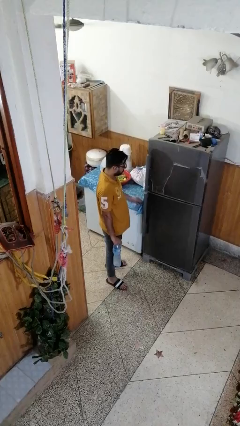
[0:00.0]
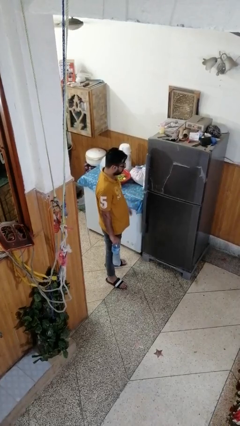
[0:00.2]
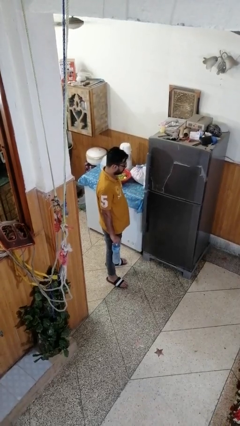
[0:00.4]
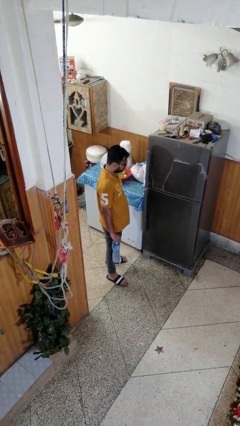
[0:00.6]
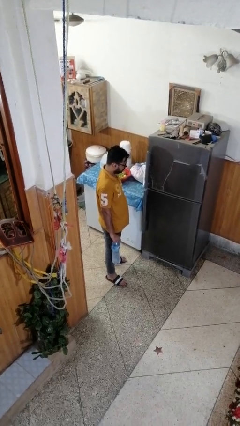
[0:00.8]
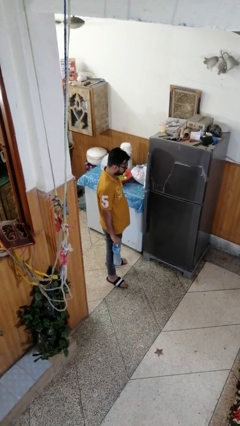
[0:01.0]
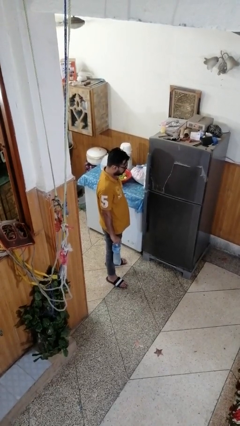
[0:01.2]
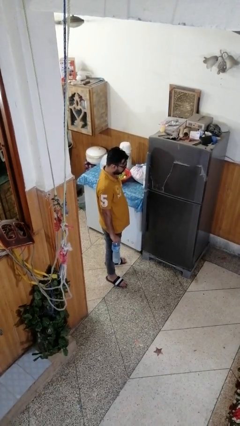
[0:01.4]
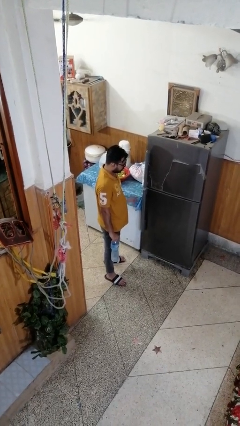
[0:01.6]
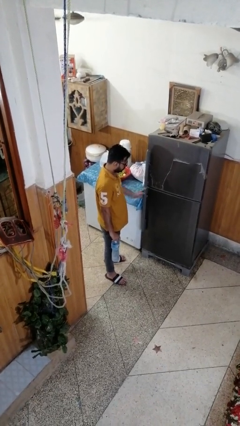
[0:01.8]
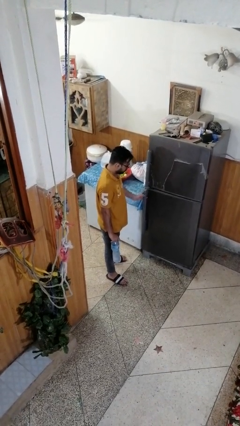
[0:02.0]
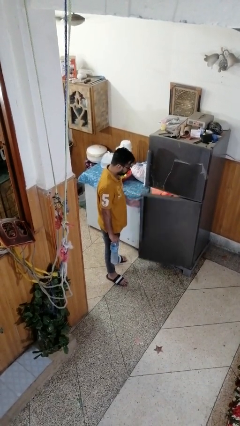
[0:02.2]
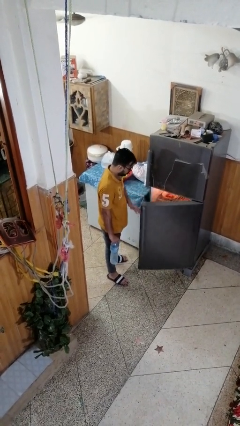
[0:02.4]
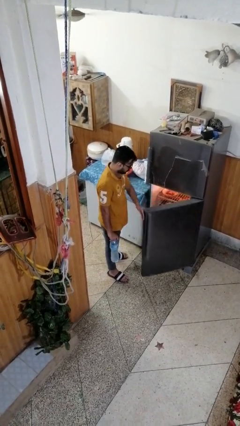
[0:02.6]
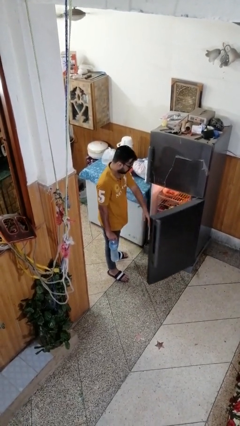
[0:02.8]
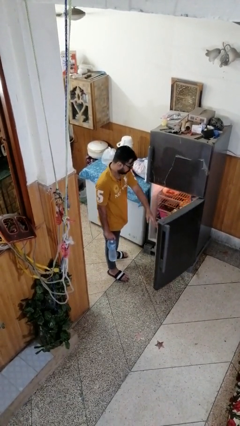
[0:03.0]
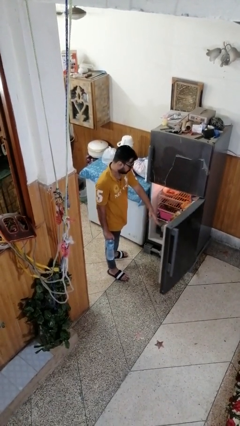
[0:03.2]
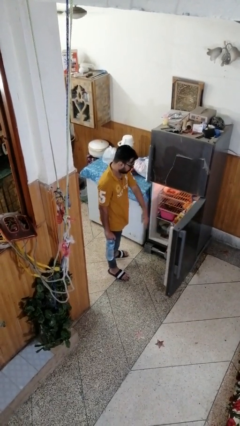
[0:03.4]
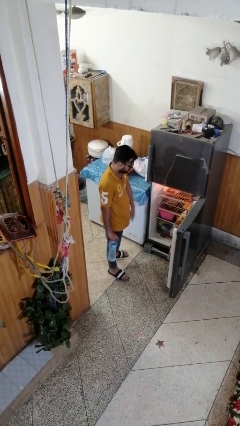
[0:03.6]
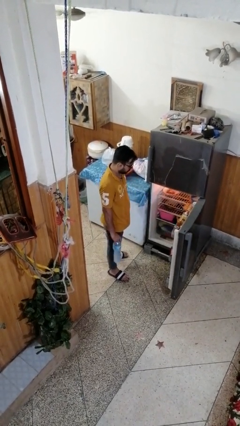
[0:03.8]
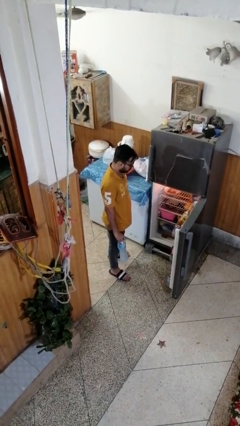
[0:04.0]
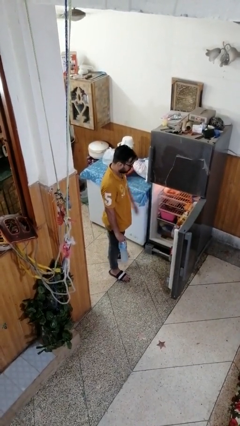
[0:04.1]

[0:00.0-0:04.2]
person opens refrigerator

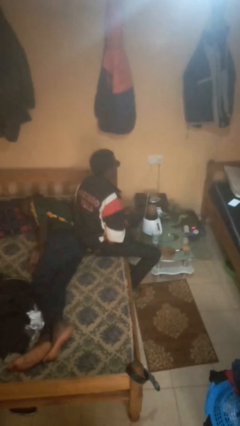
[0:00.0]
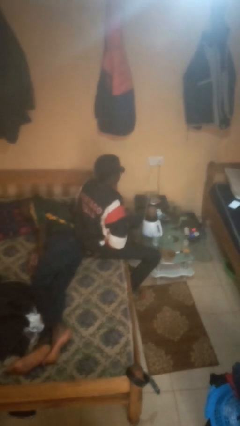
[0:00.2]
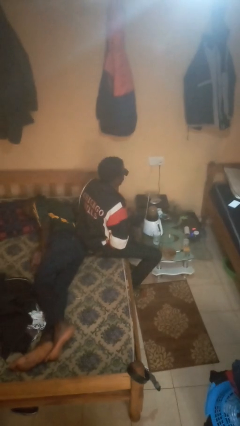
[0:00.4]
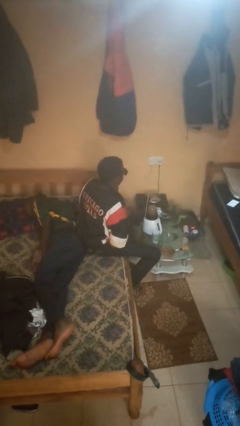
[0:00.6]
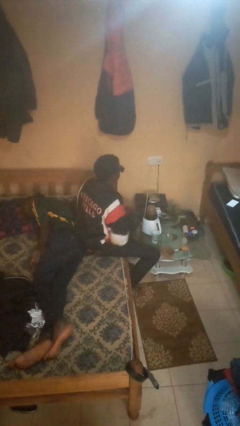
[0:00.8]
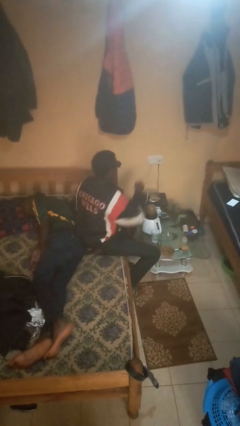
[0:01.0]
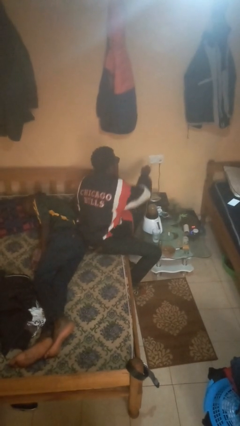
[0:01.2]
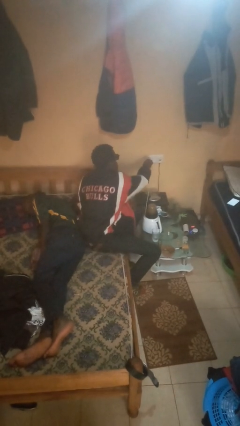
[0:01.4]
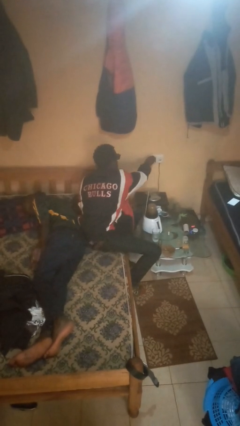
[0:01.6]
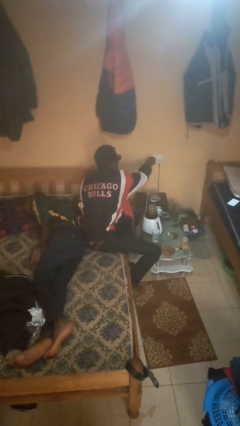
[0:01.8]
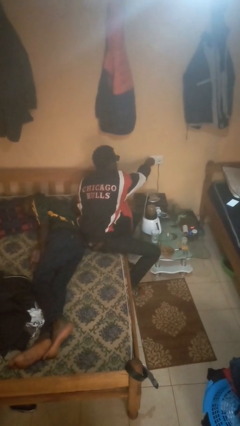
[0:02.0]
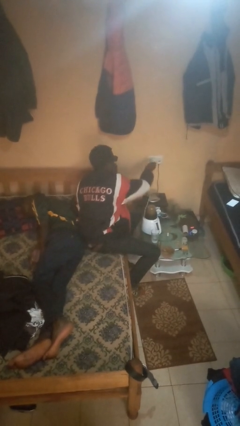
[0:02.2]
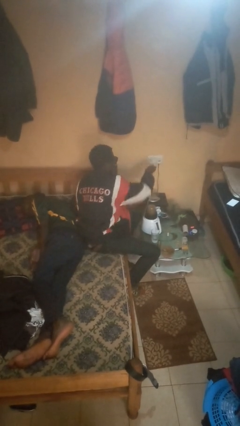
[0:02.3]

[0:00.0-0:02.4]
person unplugs from electrical socket

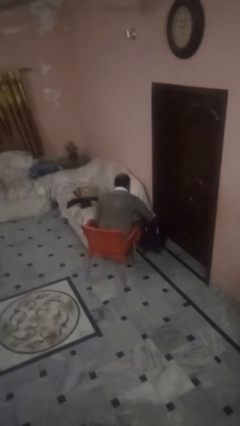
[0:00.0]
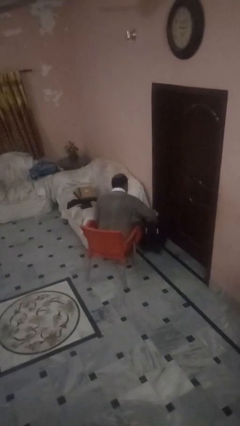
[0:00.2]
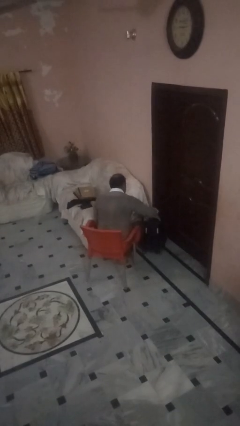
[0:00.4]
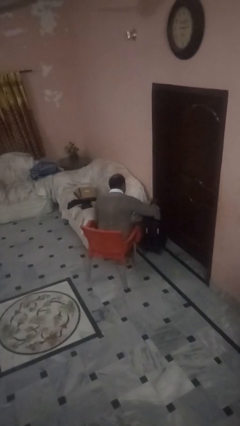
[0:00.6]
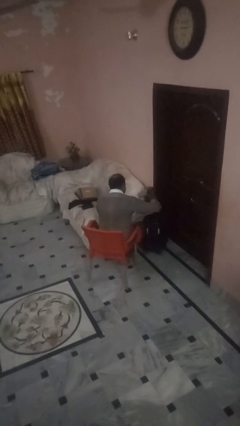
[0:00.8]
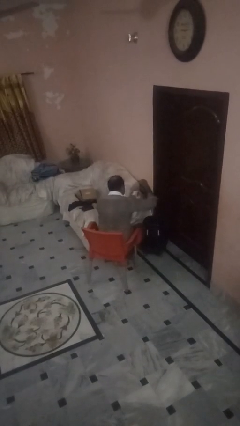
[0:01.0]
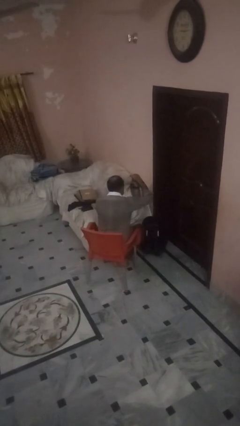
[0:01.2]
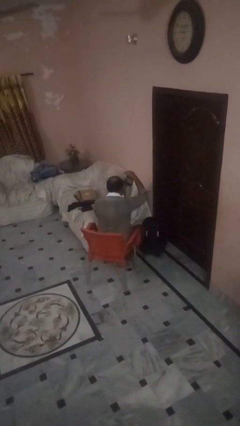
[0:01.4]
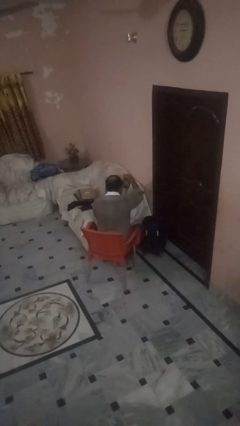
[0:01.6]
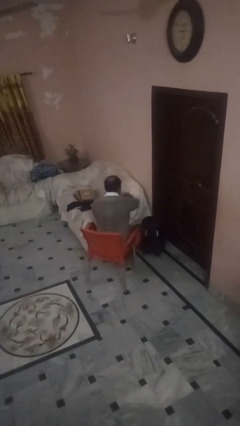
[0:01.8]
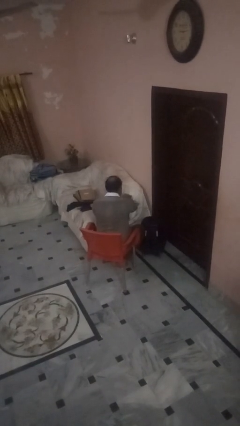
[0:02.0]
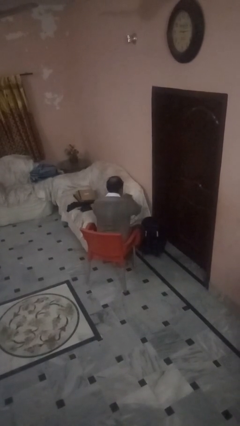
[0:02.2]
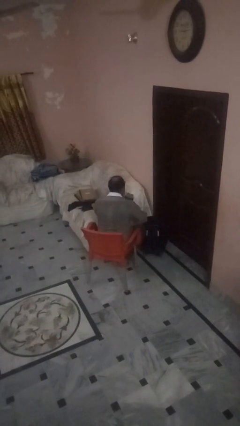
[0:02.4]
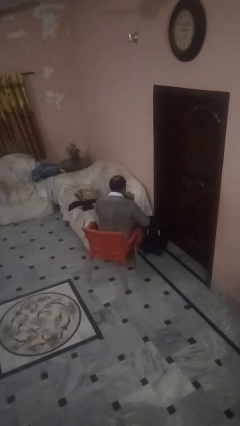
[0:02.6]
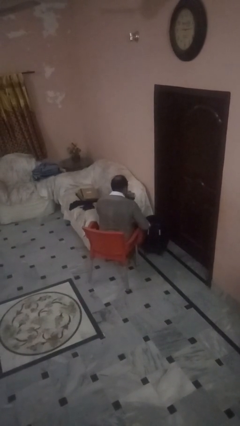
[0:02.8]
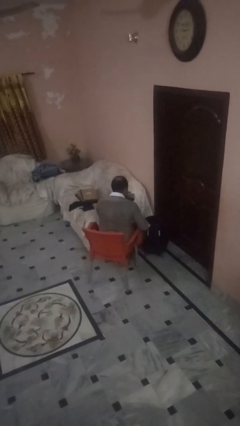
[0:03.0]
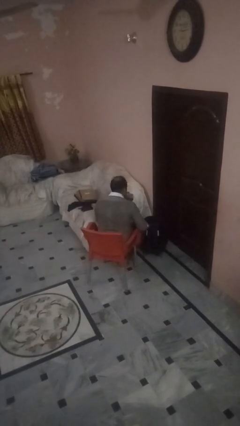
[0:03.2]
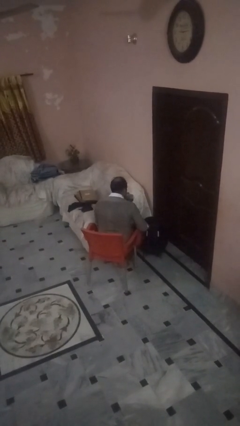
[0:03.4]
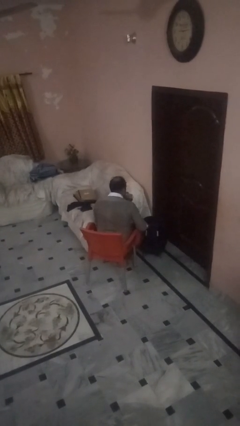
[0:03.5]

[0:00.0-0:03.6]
person unloads clothes from suitcase

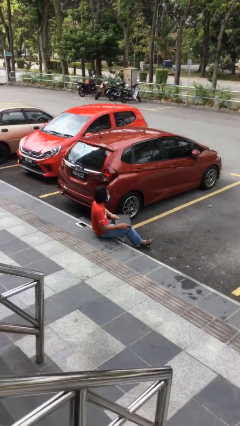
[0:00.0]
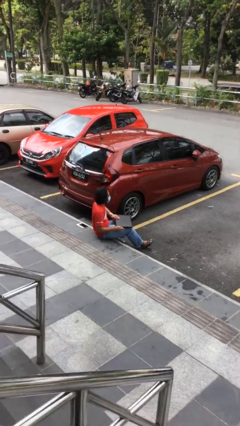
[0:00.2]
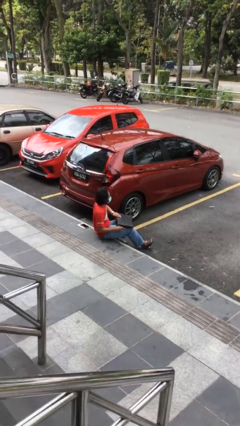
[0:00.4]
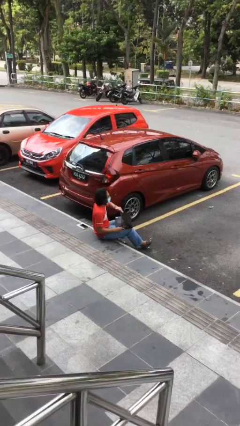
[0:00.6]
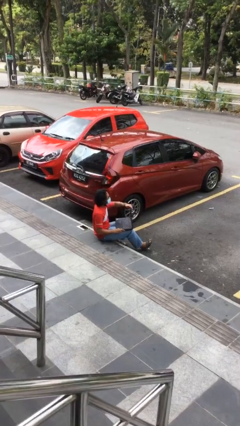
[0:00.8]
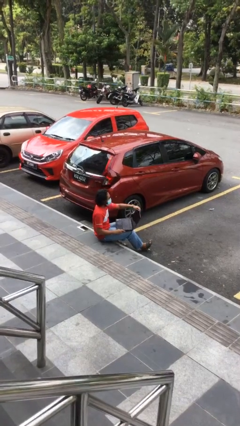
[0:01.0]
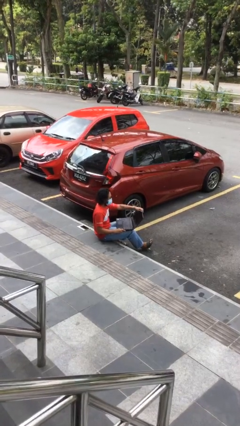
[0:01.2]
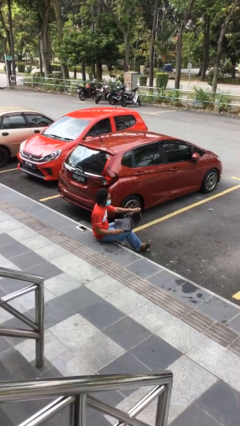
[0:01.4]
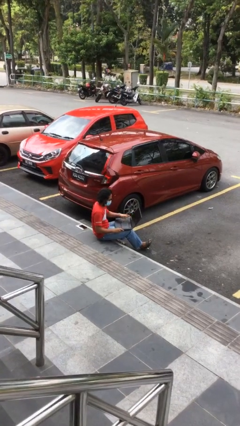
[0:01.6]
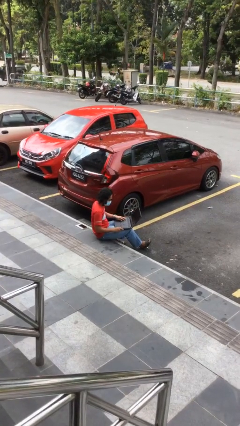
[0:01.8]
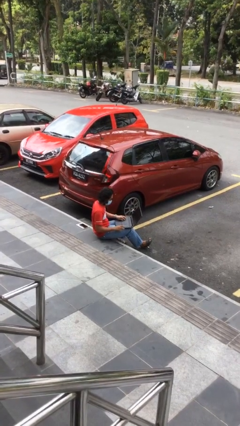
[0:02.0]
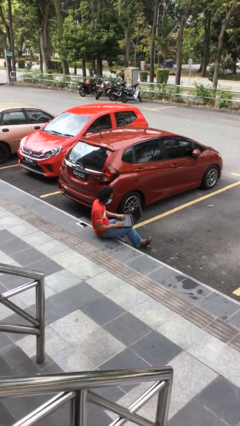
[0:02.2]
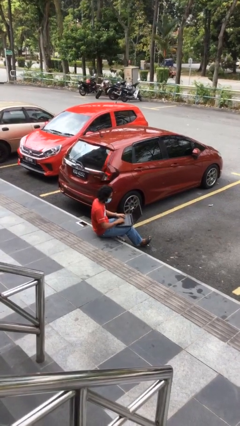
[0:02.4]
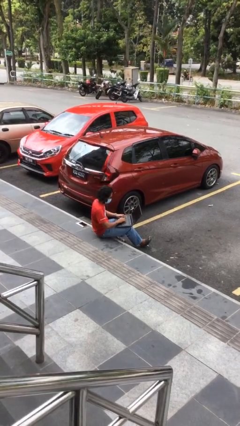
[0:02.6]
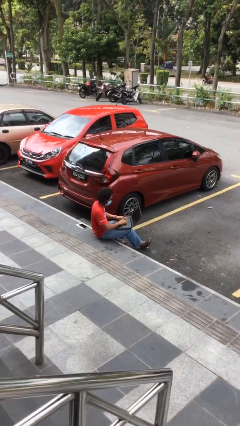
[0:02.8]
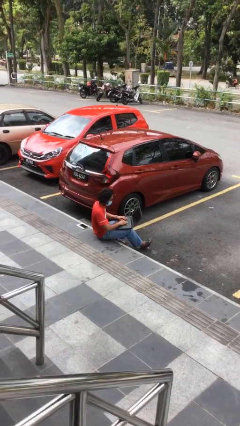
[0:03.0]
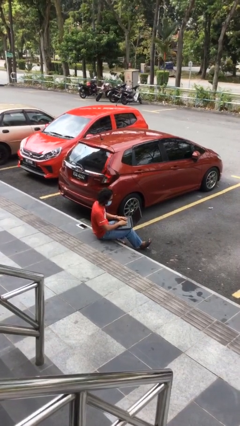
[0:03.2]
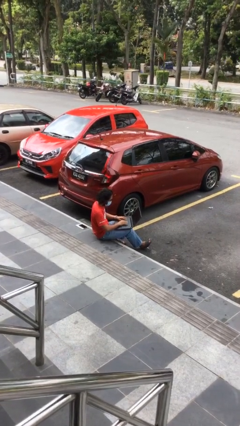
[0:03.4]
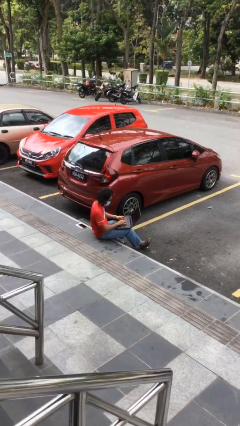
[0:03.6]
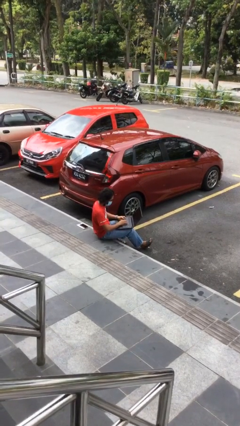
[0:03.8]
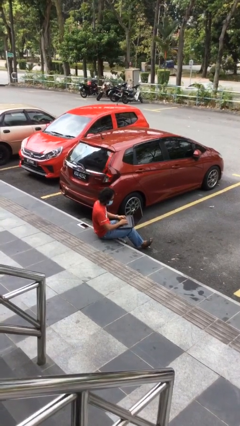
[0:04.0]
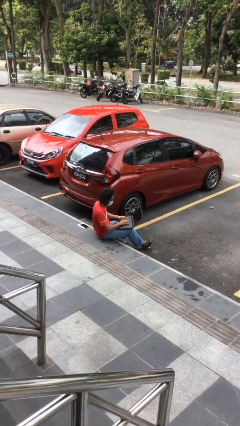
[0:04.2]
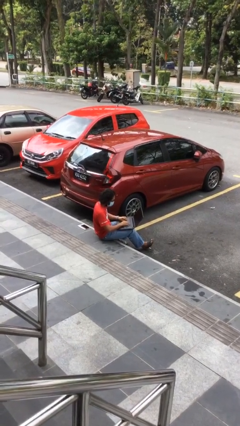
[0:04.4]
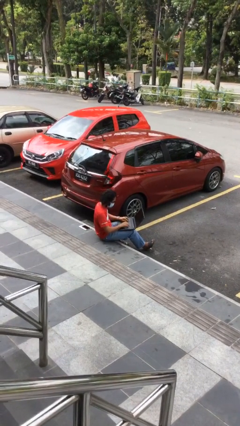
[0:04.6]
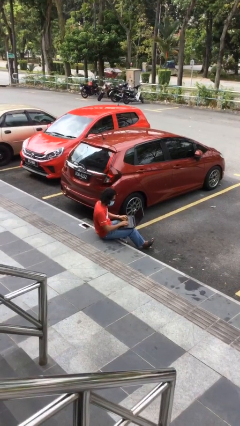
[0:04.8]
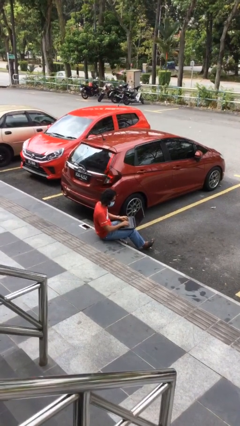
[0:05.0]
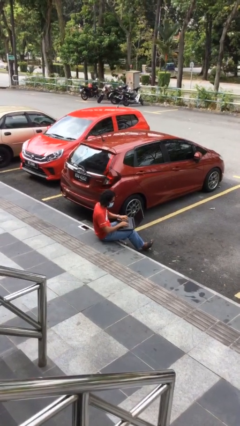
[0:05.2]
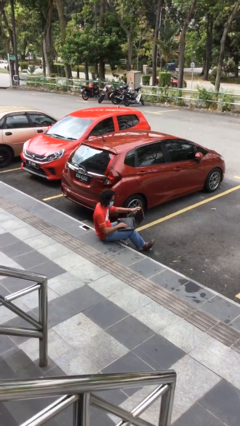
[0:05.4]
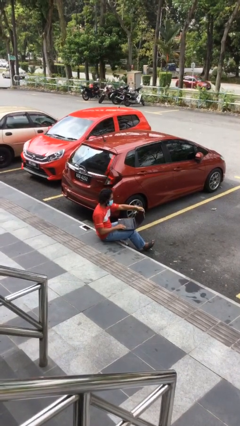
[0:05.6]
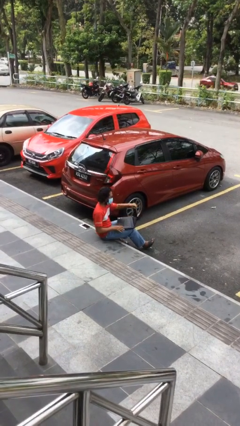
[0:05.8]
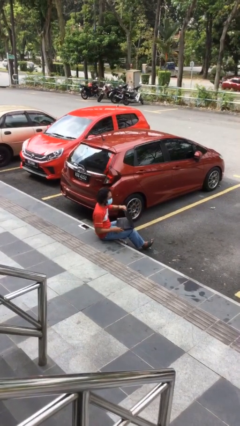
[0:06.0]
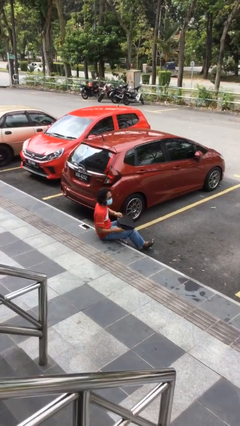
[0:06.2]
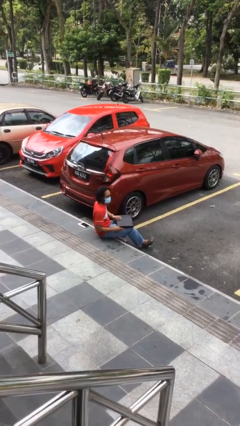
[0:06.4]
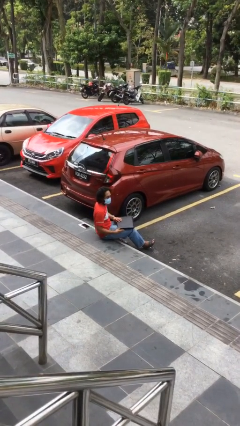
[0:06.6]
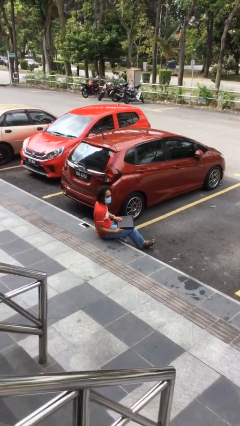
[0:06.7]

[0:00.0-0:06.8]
person interacts with laptop

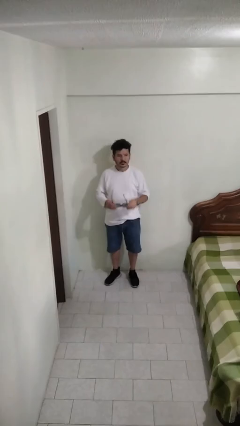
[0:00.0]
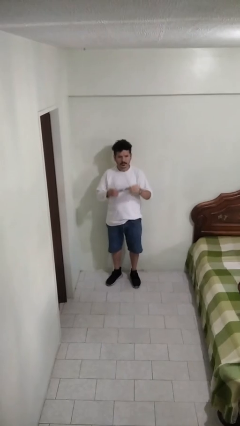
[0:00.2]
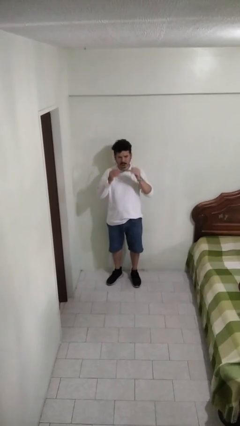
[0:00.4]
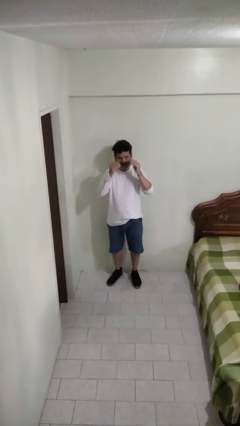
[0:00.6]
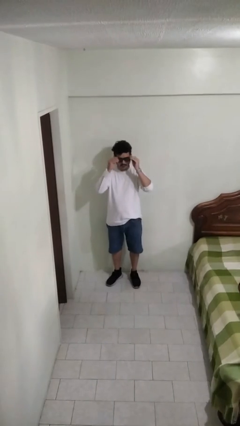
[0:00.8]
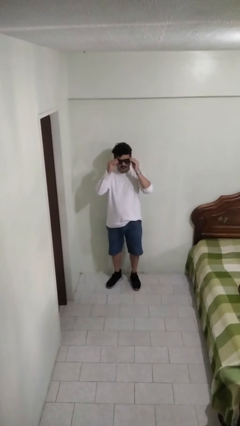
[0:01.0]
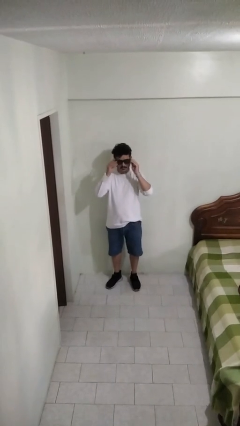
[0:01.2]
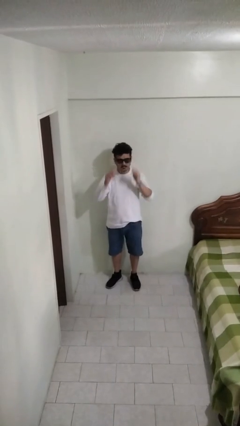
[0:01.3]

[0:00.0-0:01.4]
person puts on sunglasses
